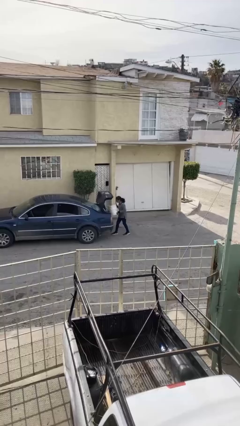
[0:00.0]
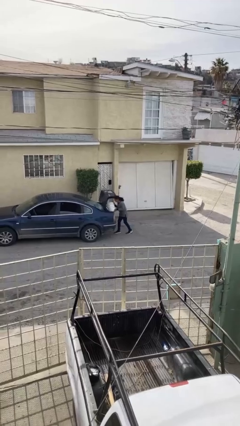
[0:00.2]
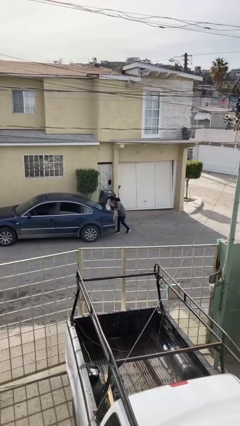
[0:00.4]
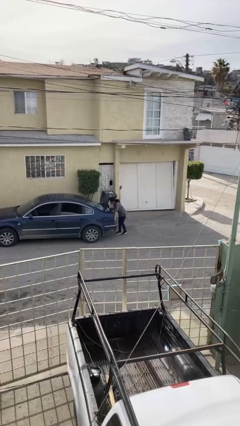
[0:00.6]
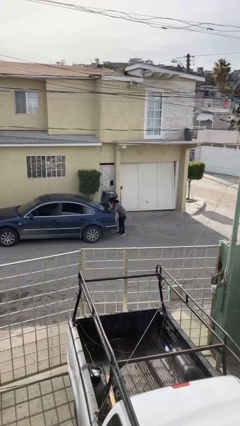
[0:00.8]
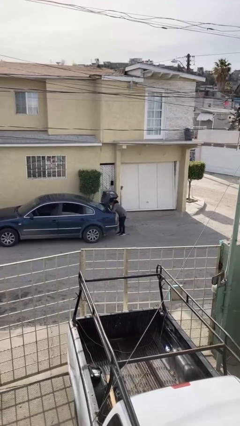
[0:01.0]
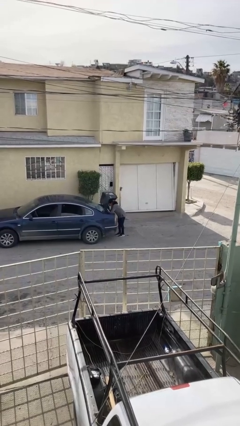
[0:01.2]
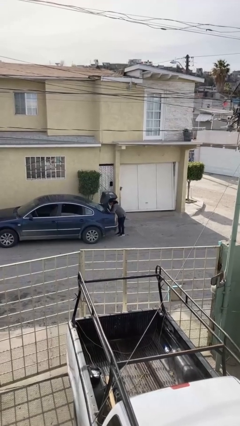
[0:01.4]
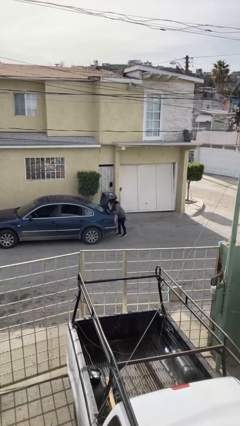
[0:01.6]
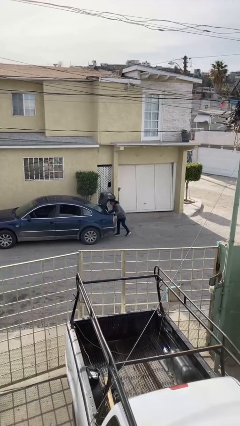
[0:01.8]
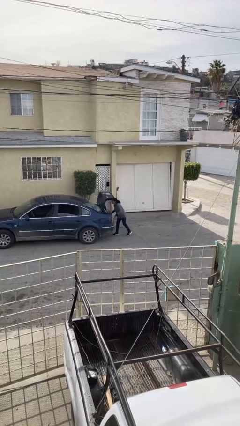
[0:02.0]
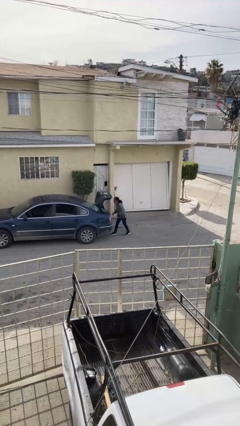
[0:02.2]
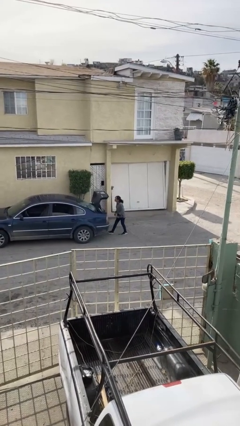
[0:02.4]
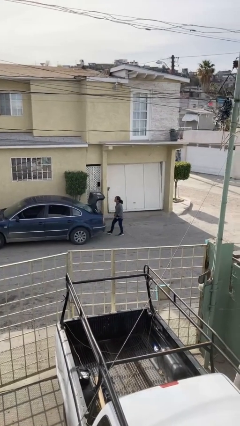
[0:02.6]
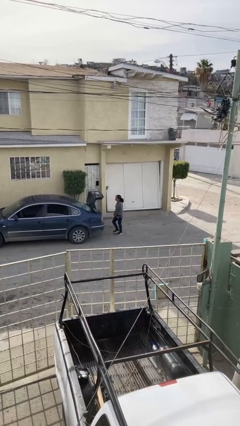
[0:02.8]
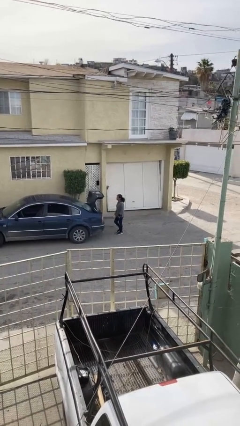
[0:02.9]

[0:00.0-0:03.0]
person loads car

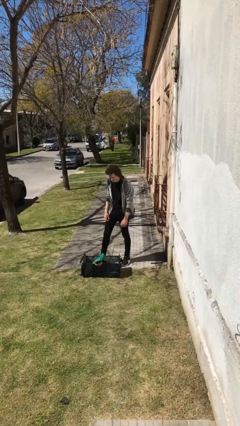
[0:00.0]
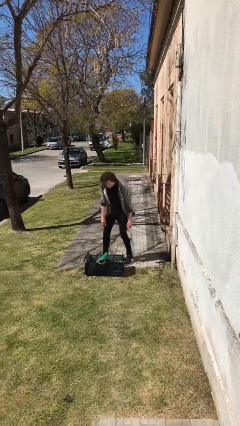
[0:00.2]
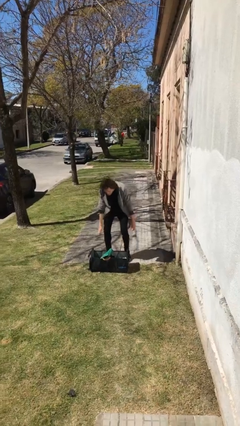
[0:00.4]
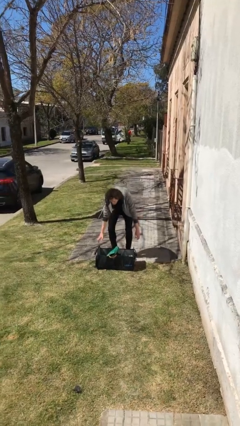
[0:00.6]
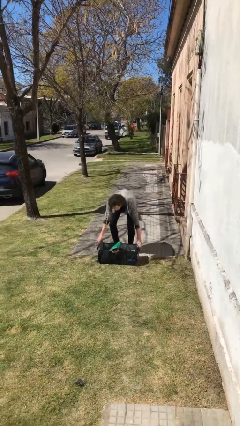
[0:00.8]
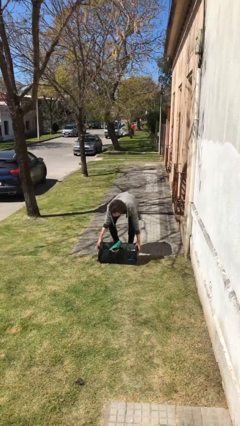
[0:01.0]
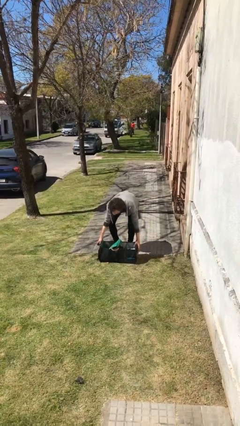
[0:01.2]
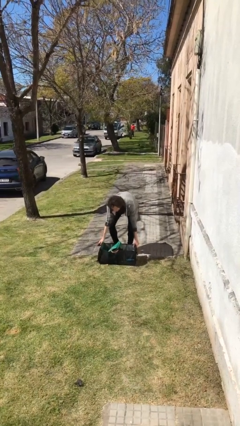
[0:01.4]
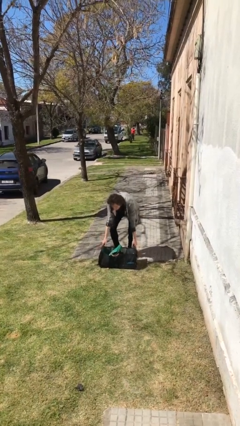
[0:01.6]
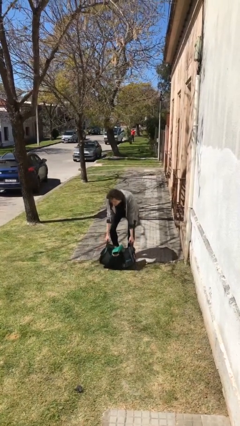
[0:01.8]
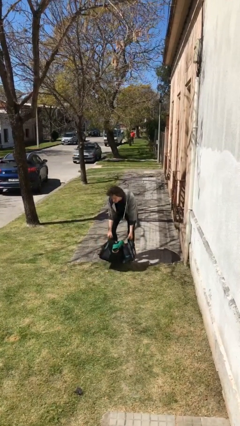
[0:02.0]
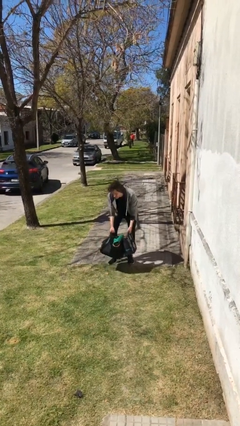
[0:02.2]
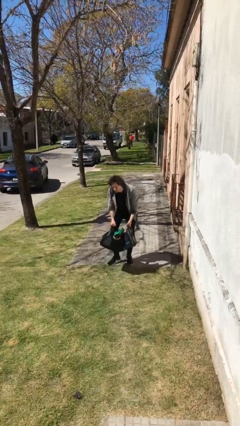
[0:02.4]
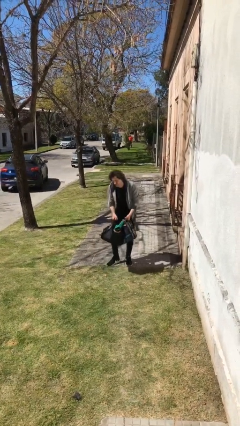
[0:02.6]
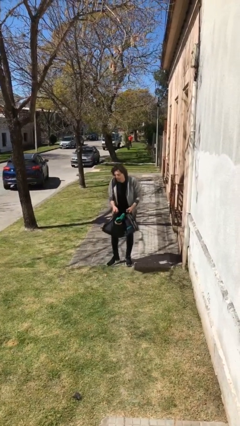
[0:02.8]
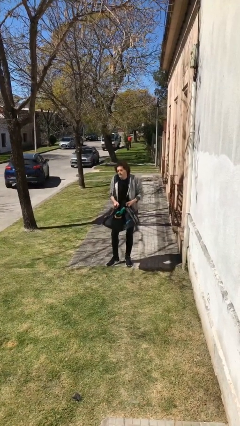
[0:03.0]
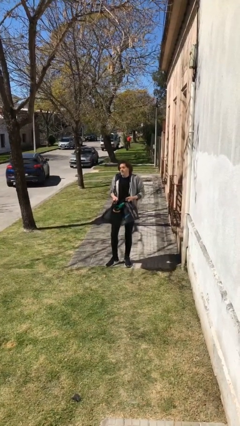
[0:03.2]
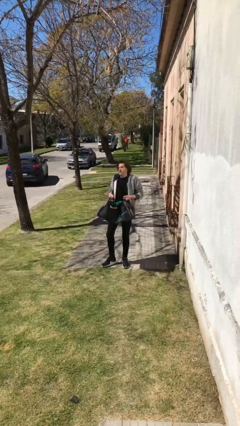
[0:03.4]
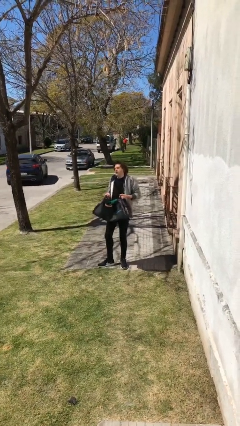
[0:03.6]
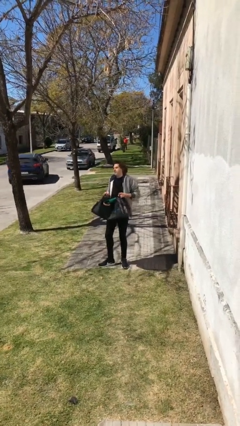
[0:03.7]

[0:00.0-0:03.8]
person picks up object from floor

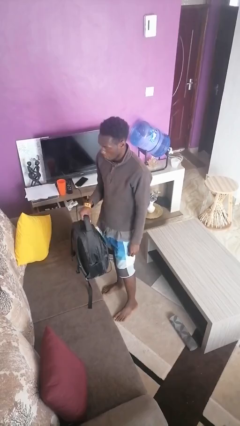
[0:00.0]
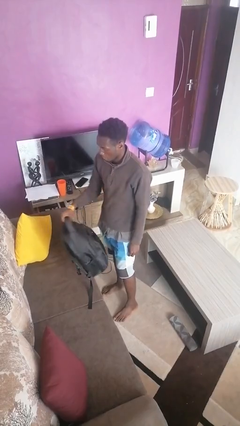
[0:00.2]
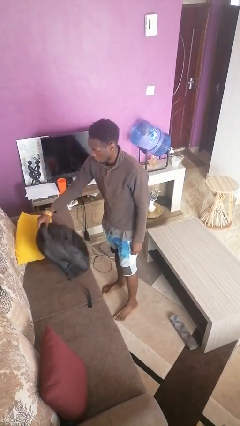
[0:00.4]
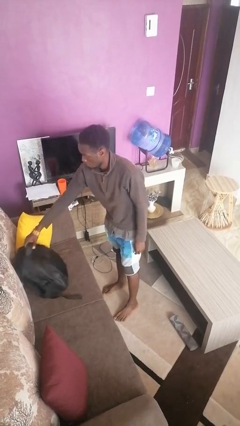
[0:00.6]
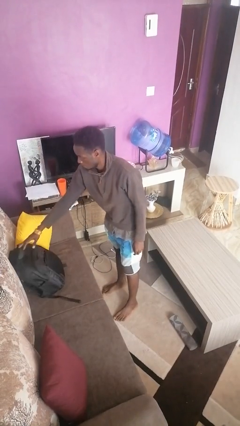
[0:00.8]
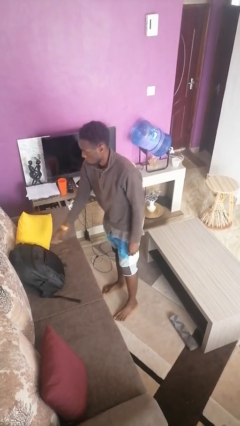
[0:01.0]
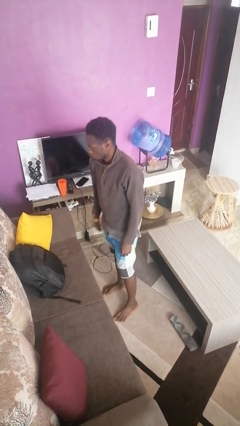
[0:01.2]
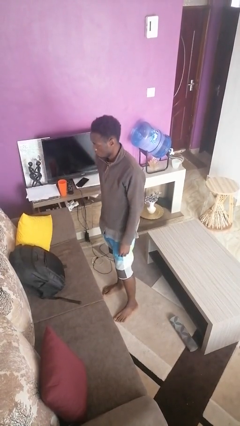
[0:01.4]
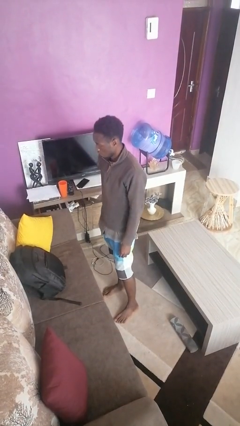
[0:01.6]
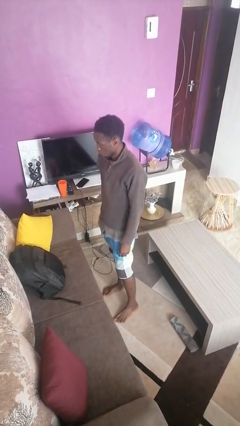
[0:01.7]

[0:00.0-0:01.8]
person puts down object on couch

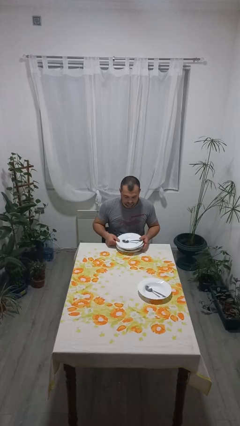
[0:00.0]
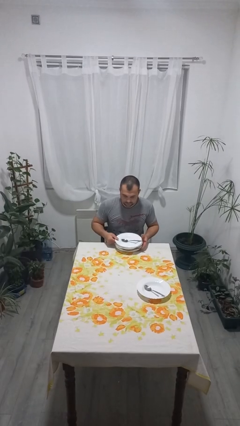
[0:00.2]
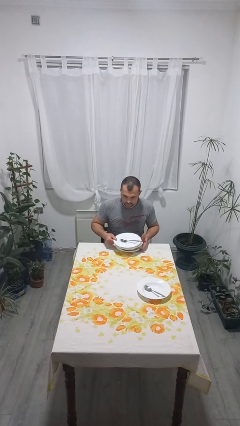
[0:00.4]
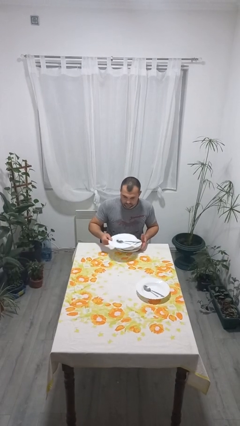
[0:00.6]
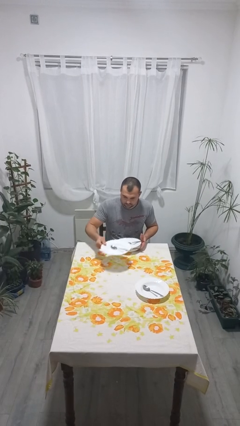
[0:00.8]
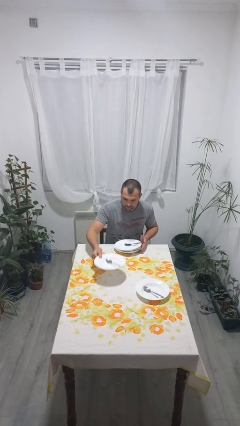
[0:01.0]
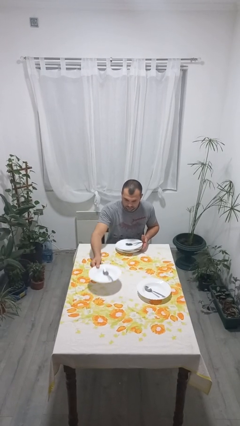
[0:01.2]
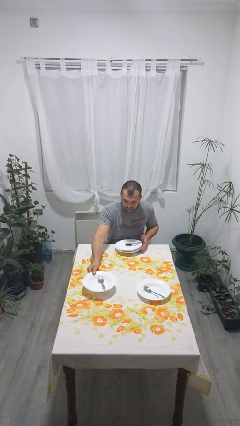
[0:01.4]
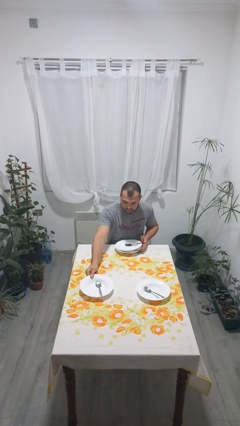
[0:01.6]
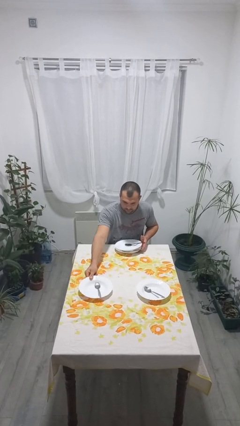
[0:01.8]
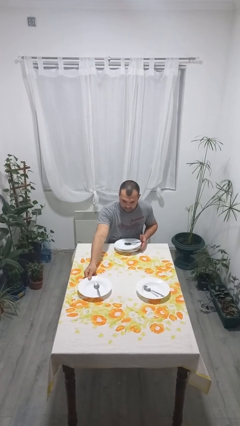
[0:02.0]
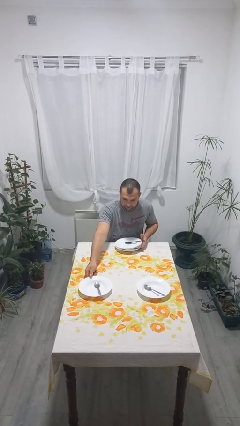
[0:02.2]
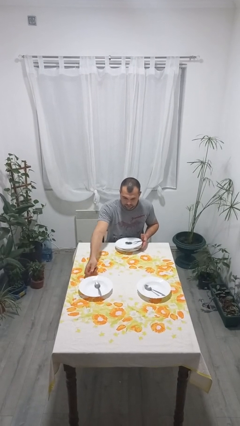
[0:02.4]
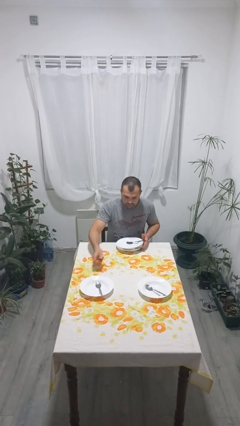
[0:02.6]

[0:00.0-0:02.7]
person sets table

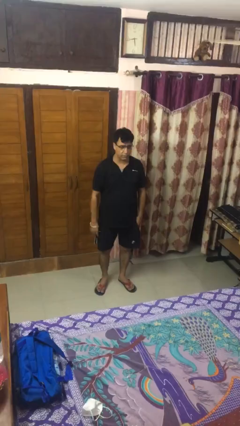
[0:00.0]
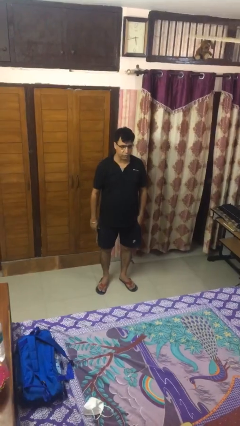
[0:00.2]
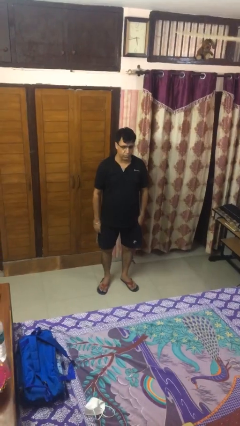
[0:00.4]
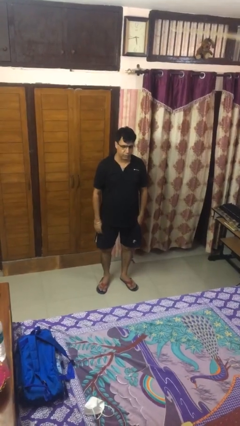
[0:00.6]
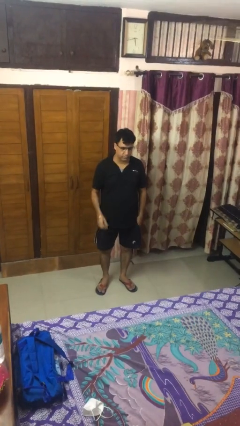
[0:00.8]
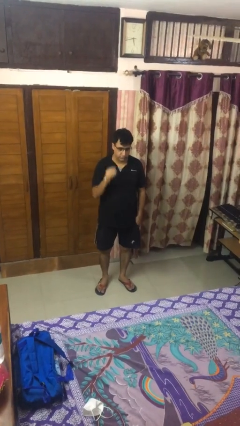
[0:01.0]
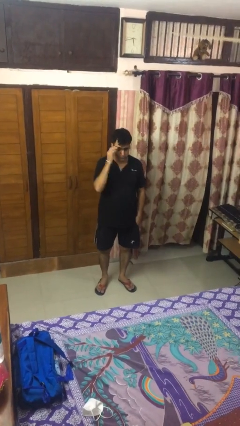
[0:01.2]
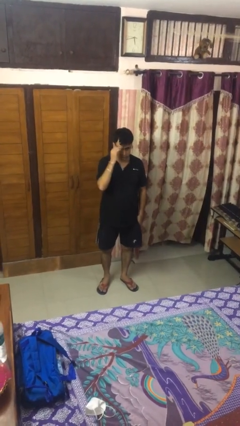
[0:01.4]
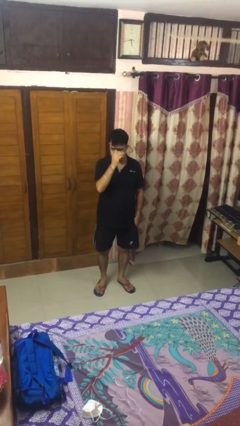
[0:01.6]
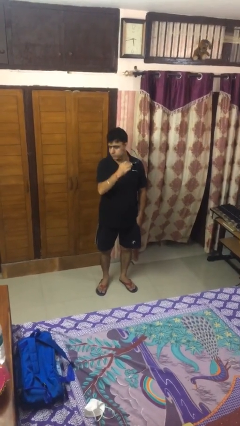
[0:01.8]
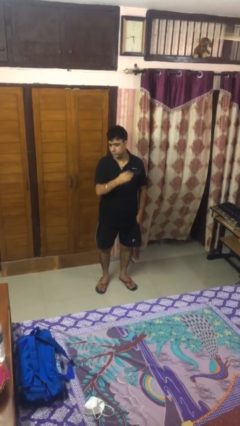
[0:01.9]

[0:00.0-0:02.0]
person takes off glasses

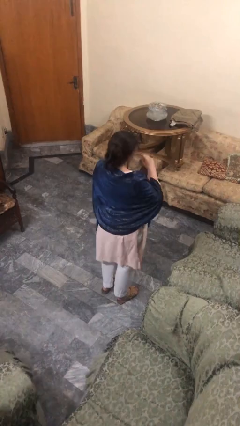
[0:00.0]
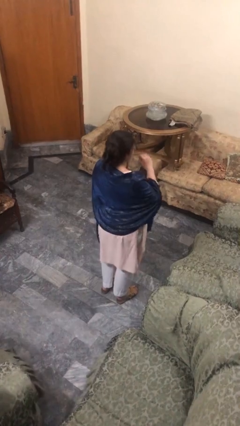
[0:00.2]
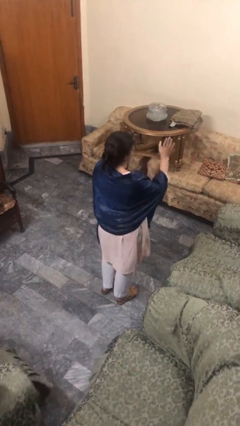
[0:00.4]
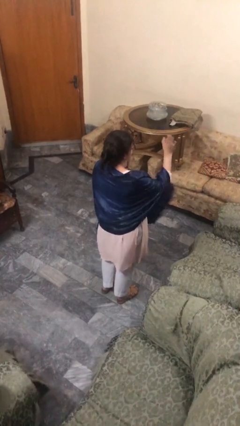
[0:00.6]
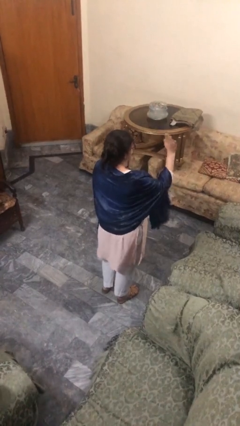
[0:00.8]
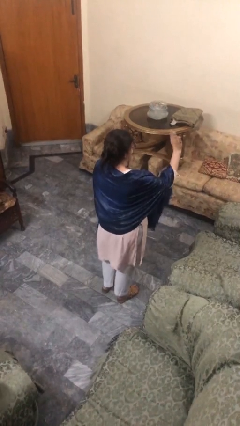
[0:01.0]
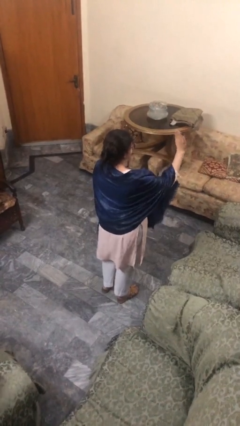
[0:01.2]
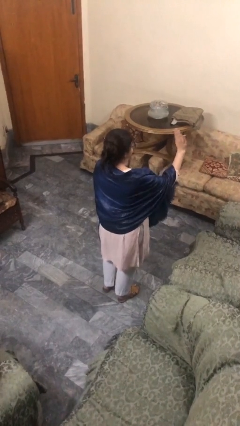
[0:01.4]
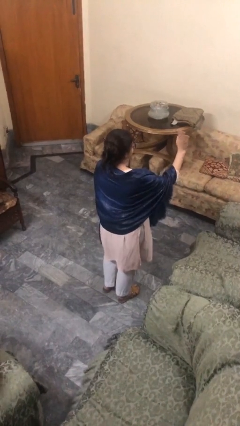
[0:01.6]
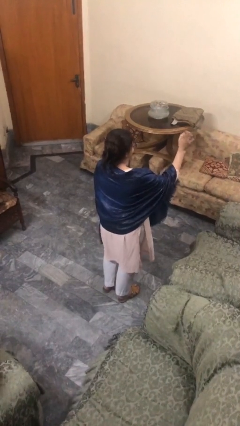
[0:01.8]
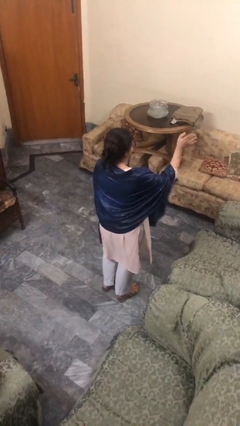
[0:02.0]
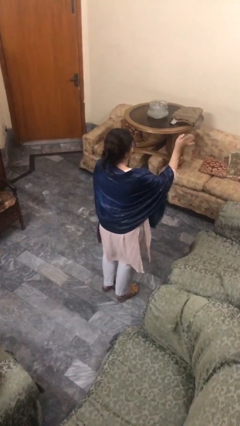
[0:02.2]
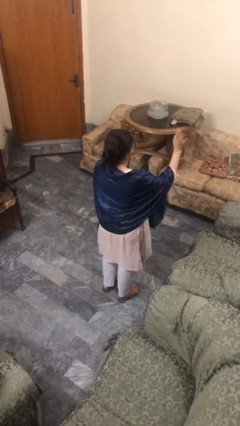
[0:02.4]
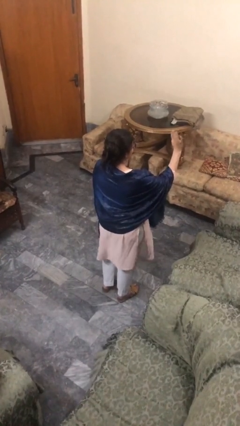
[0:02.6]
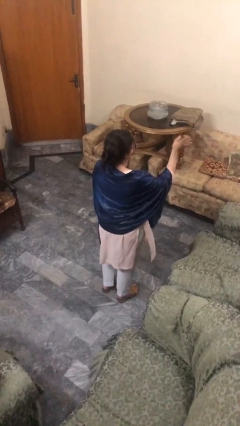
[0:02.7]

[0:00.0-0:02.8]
person waves at person

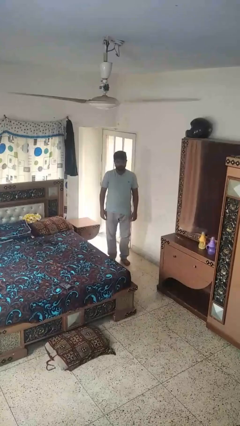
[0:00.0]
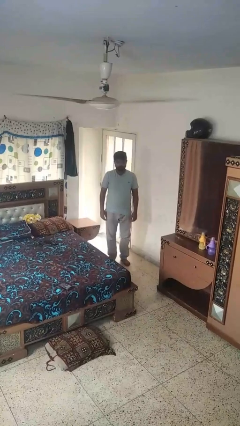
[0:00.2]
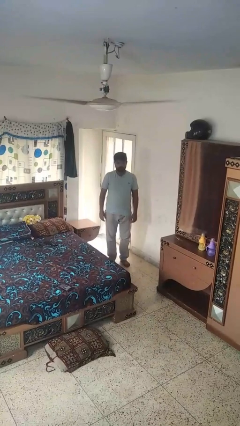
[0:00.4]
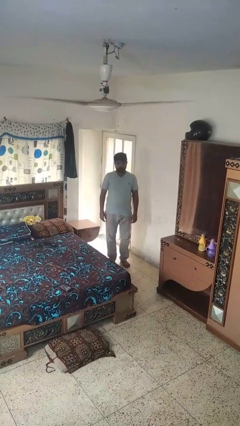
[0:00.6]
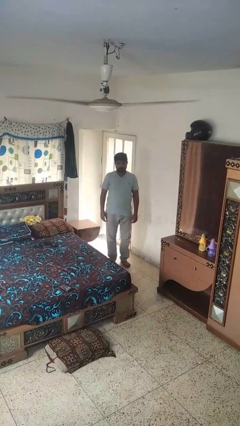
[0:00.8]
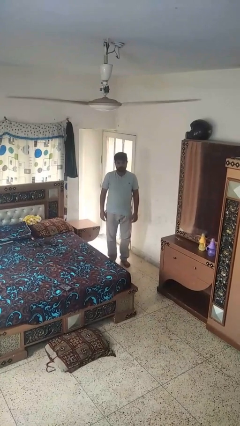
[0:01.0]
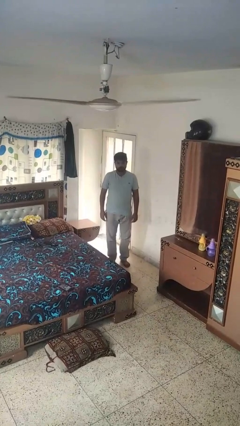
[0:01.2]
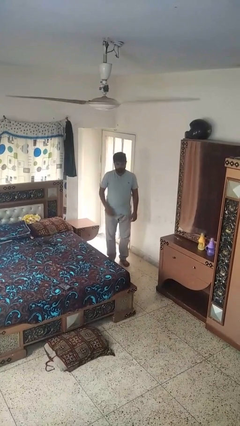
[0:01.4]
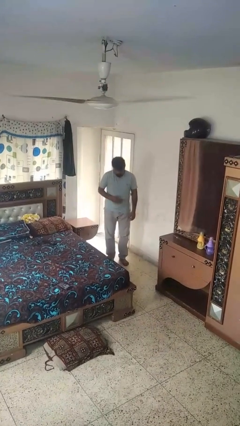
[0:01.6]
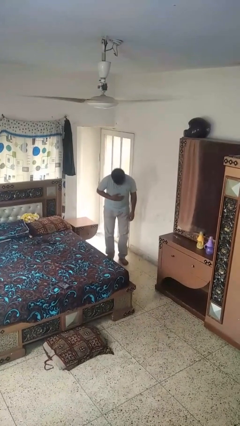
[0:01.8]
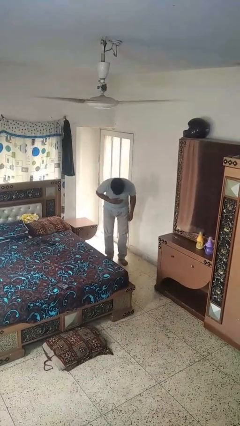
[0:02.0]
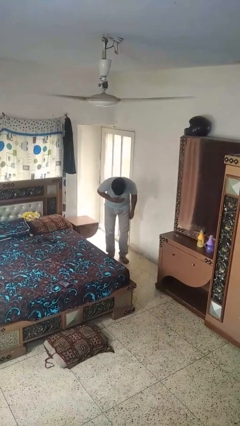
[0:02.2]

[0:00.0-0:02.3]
person bows
